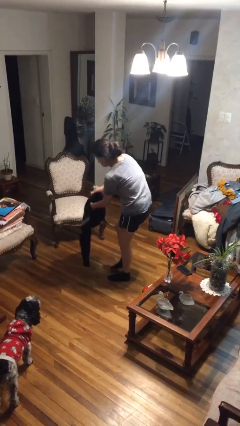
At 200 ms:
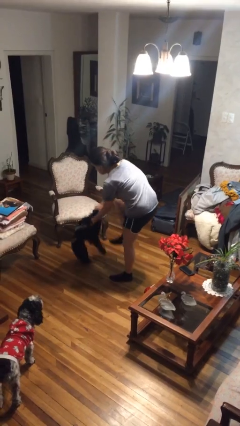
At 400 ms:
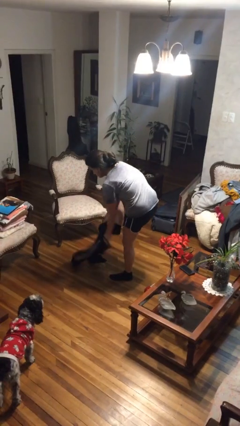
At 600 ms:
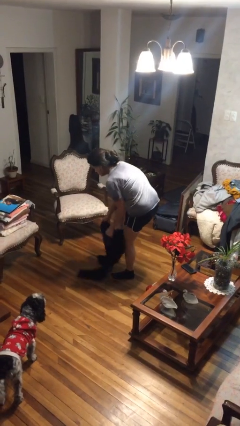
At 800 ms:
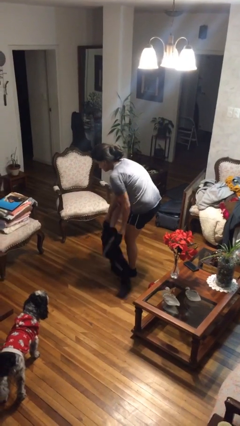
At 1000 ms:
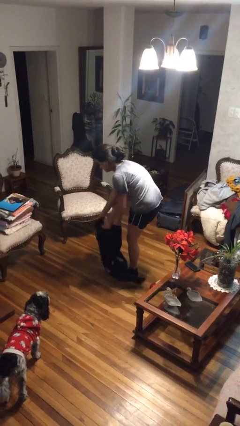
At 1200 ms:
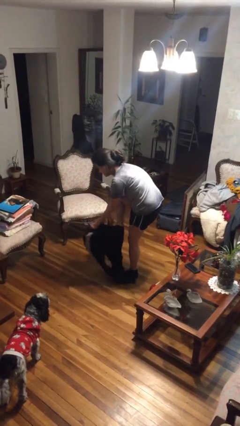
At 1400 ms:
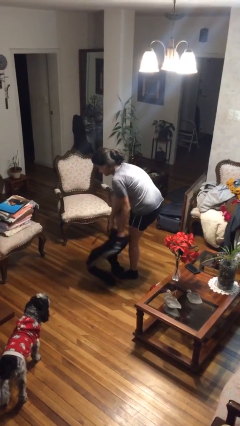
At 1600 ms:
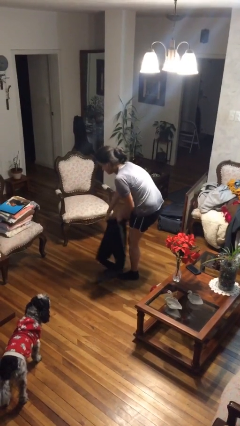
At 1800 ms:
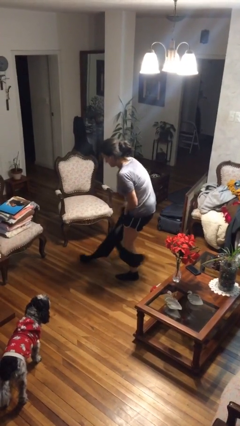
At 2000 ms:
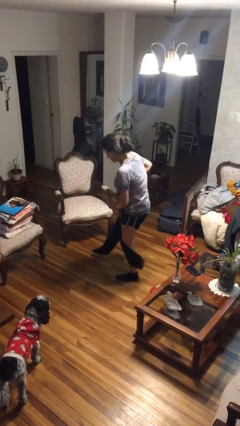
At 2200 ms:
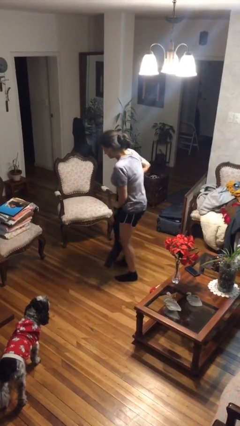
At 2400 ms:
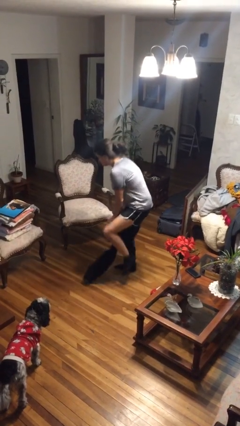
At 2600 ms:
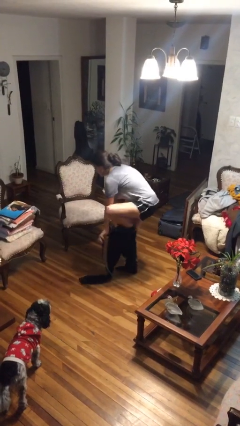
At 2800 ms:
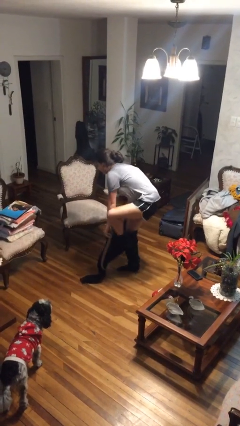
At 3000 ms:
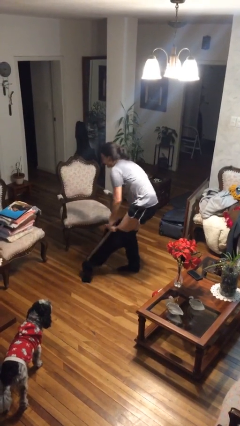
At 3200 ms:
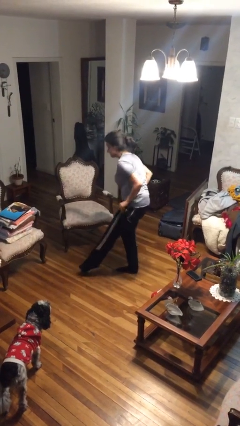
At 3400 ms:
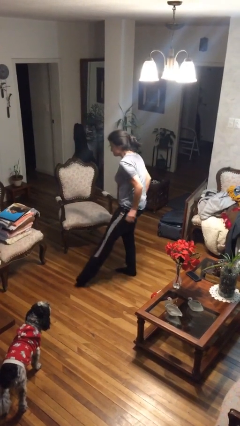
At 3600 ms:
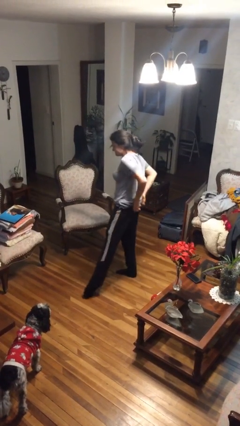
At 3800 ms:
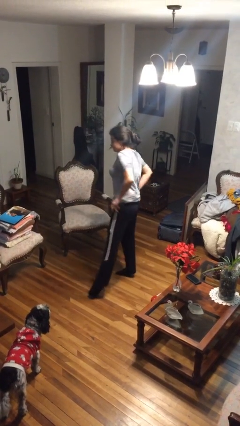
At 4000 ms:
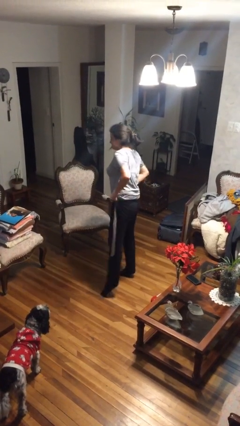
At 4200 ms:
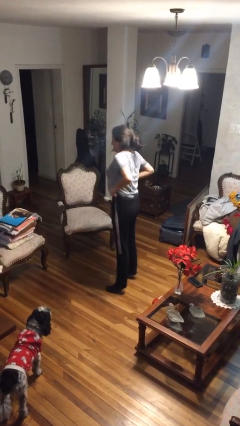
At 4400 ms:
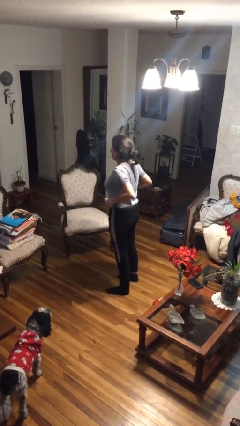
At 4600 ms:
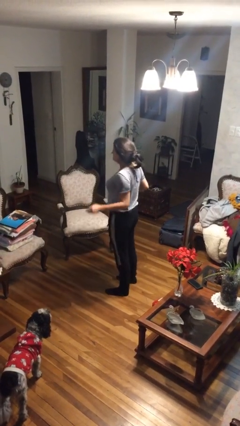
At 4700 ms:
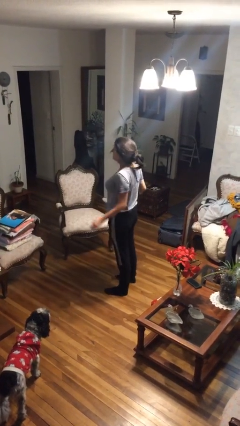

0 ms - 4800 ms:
person puts on pants

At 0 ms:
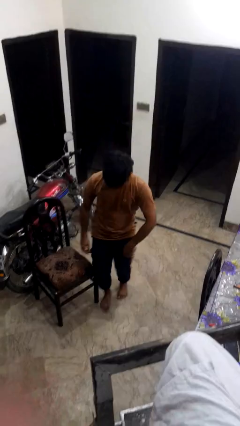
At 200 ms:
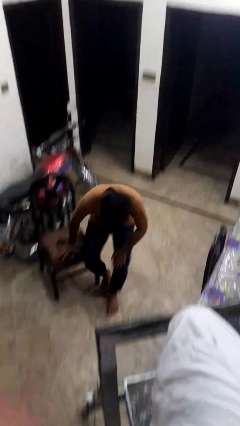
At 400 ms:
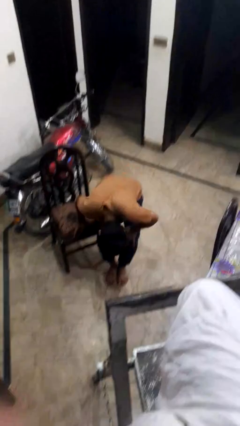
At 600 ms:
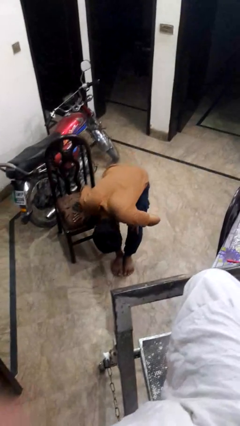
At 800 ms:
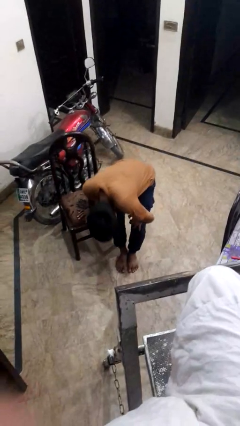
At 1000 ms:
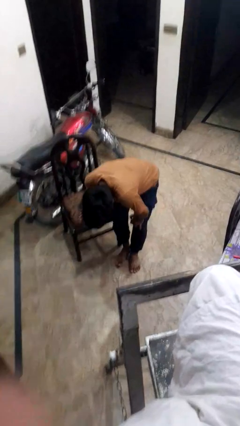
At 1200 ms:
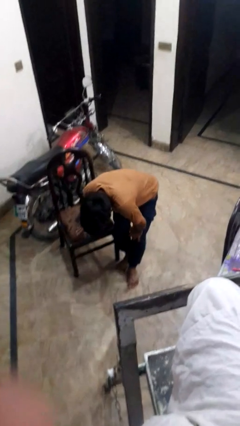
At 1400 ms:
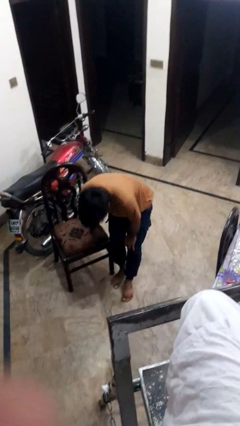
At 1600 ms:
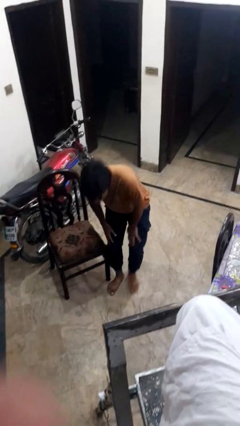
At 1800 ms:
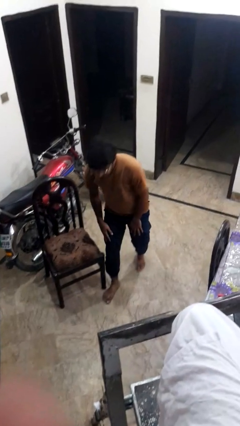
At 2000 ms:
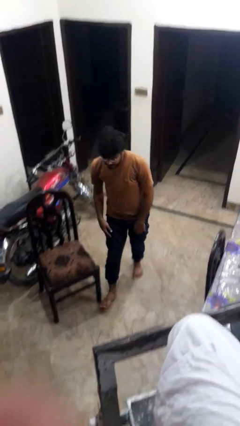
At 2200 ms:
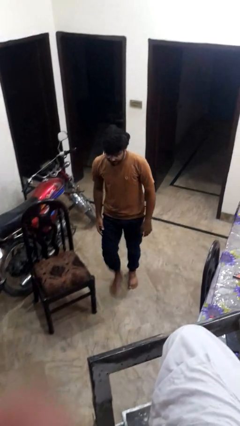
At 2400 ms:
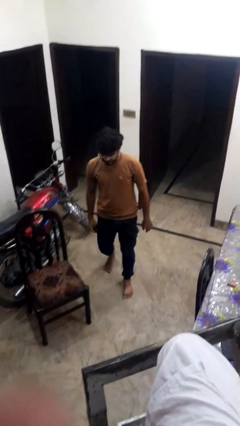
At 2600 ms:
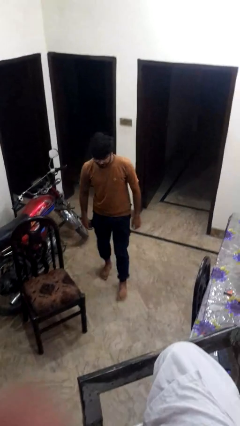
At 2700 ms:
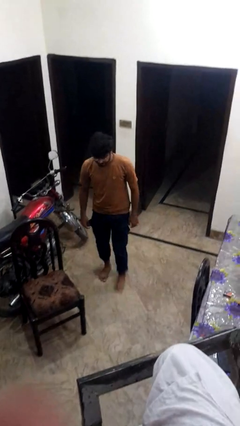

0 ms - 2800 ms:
person stubs toe

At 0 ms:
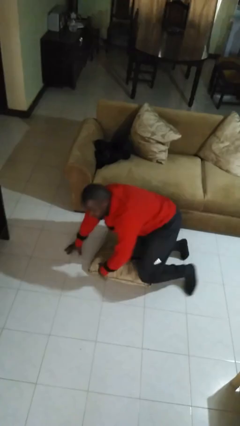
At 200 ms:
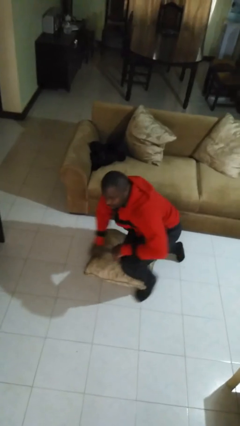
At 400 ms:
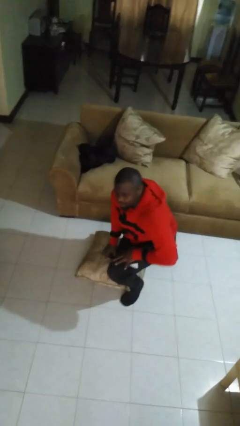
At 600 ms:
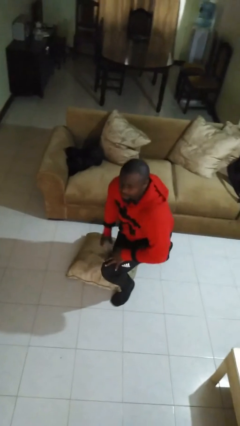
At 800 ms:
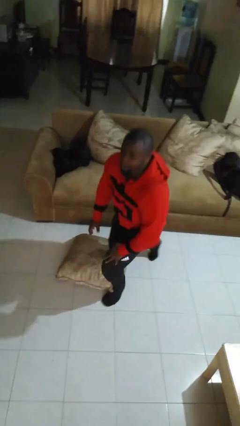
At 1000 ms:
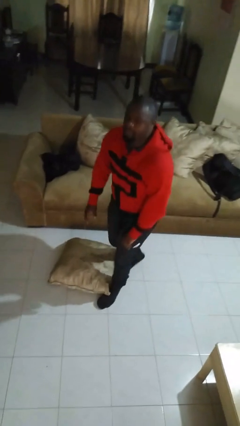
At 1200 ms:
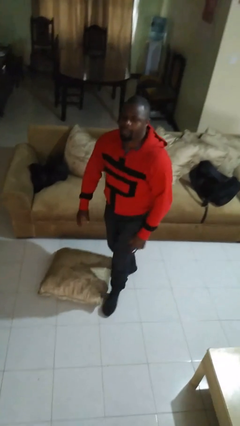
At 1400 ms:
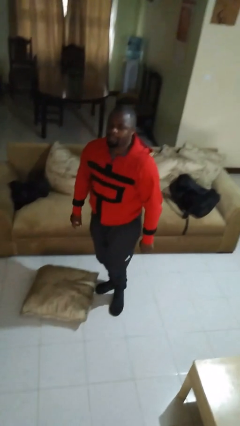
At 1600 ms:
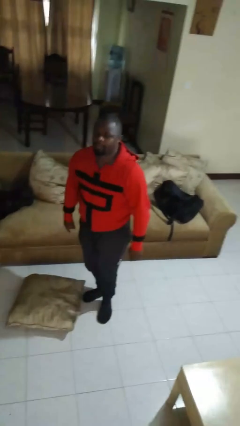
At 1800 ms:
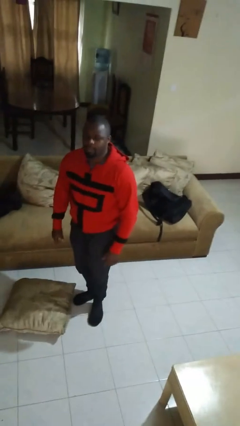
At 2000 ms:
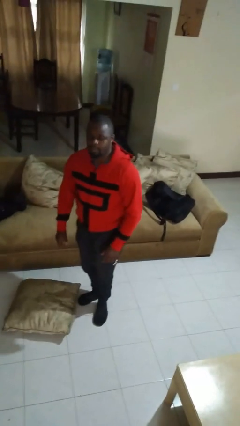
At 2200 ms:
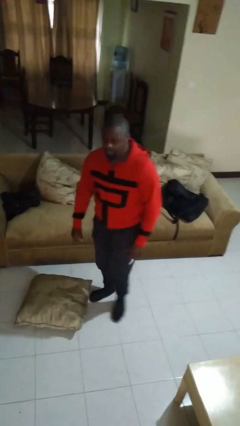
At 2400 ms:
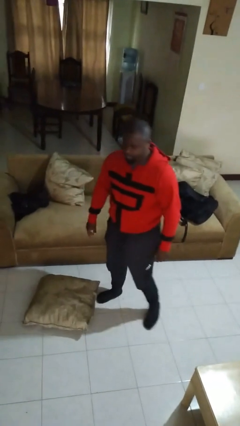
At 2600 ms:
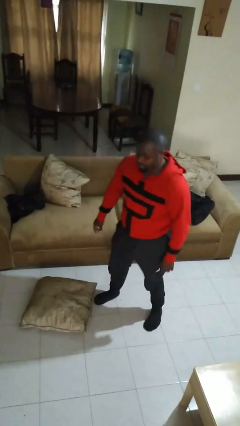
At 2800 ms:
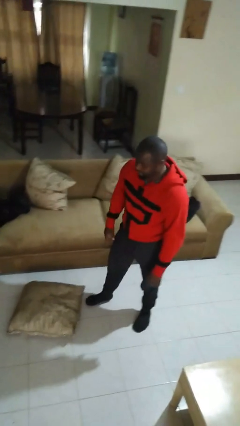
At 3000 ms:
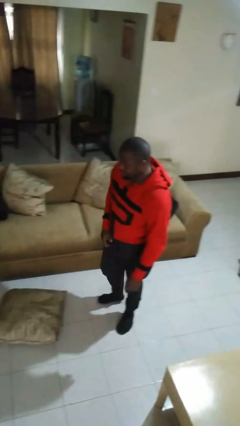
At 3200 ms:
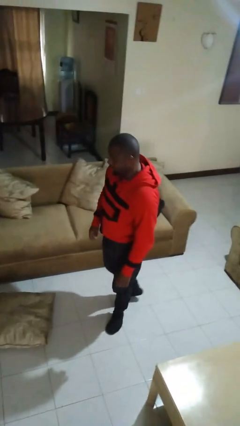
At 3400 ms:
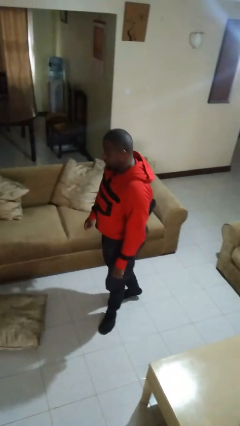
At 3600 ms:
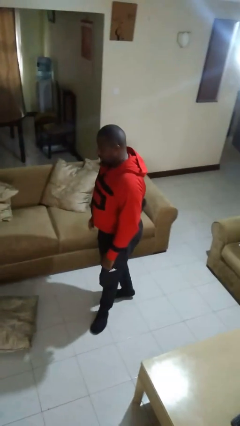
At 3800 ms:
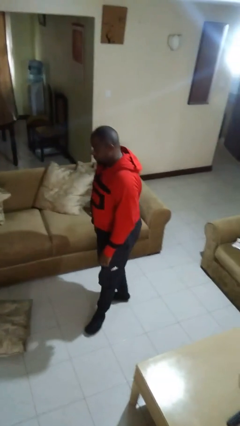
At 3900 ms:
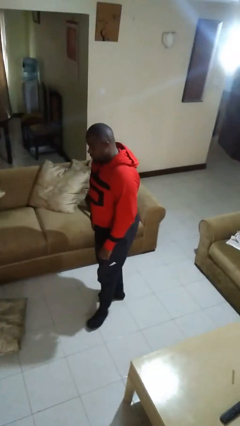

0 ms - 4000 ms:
person stands up from floor

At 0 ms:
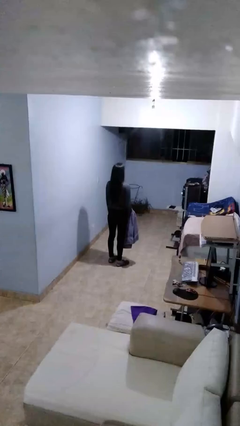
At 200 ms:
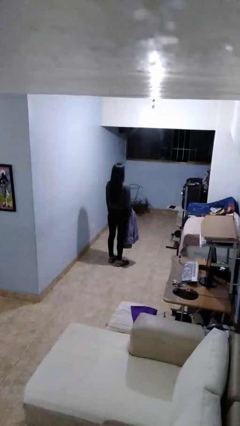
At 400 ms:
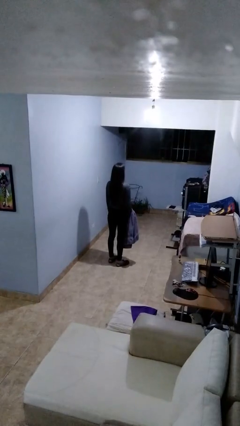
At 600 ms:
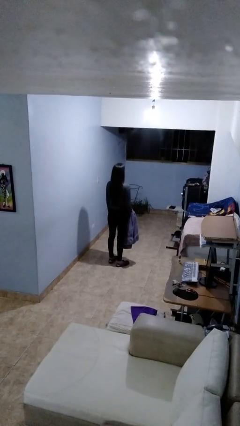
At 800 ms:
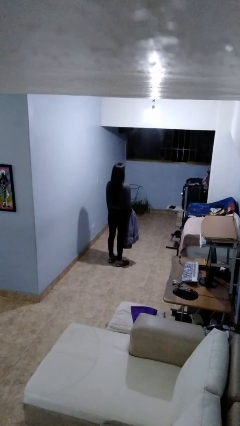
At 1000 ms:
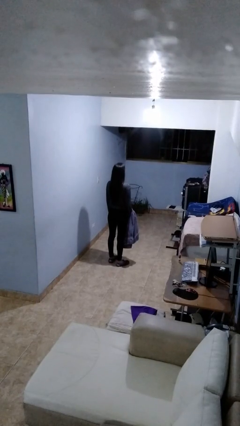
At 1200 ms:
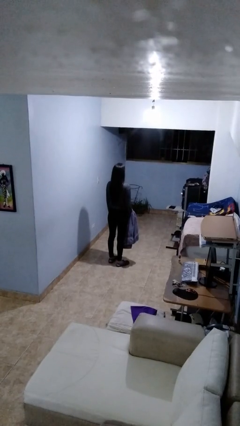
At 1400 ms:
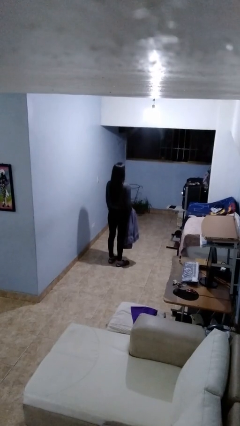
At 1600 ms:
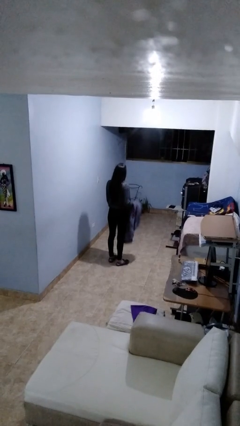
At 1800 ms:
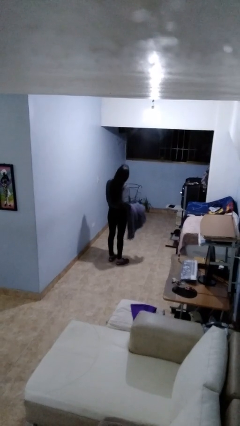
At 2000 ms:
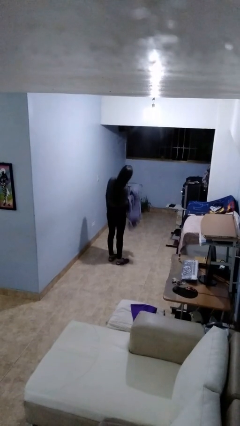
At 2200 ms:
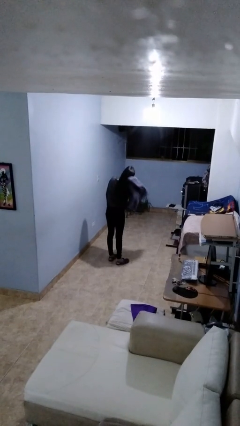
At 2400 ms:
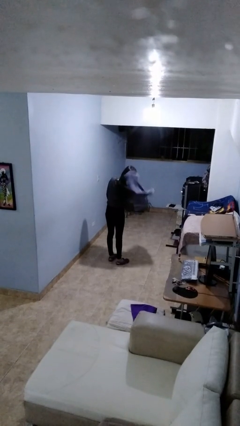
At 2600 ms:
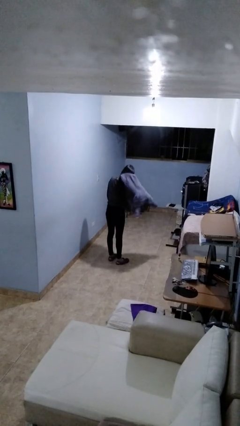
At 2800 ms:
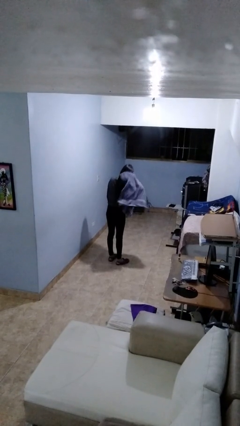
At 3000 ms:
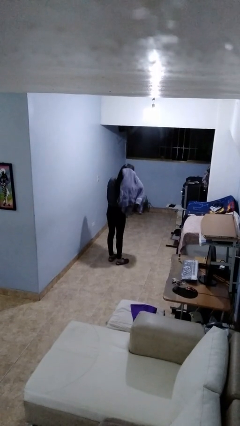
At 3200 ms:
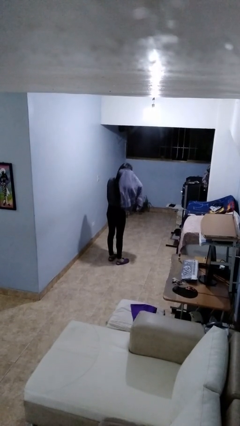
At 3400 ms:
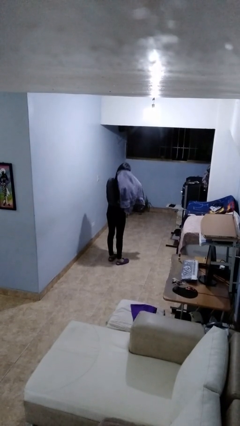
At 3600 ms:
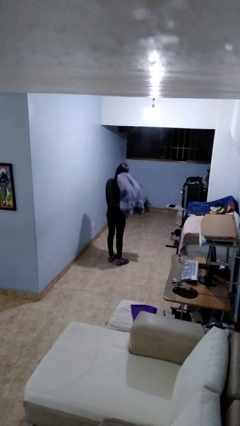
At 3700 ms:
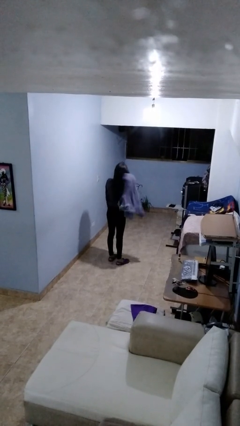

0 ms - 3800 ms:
person dries hair with towel

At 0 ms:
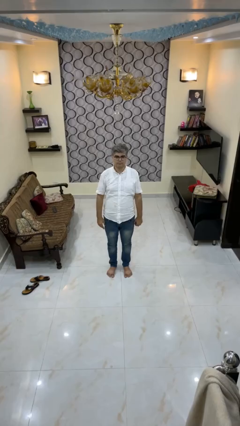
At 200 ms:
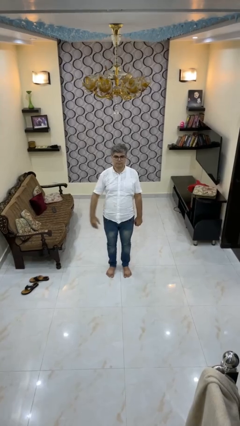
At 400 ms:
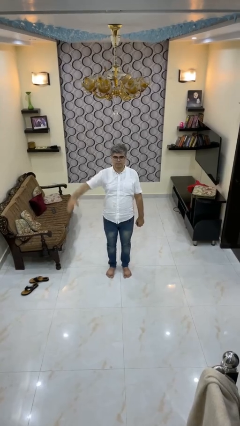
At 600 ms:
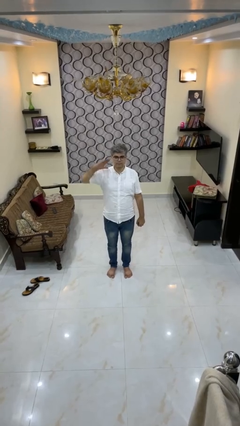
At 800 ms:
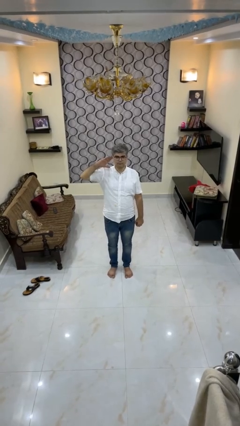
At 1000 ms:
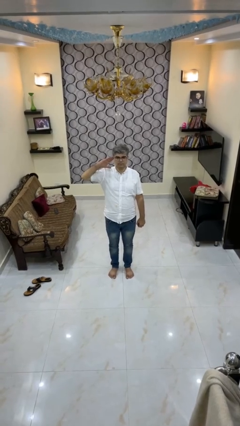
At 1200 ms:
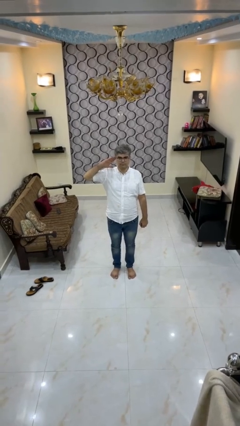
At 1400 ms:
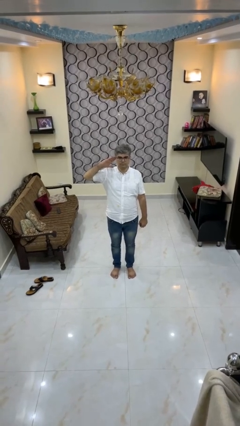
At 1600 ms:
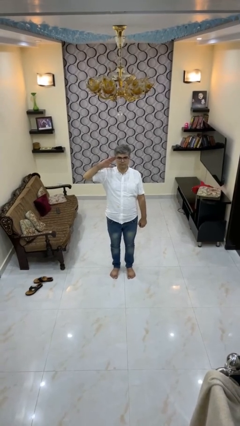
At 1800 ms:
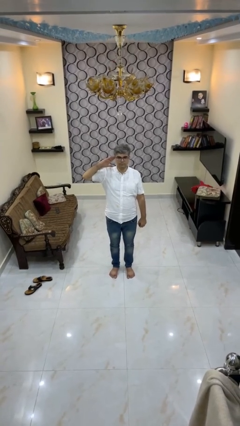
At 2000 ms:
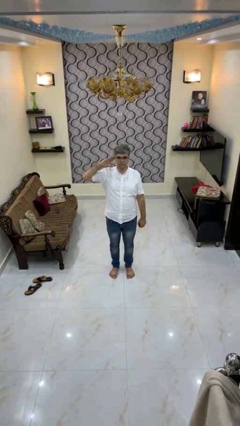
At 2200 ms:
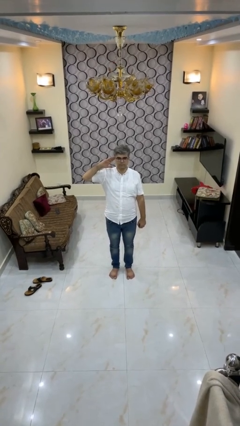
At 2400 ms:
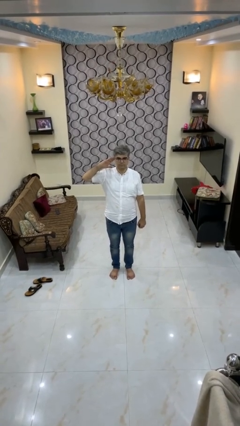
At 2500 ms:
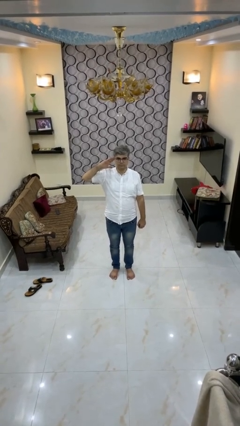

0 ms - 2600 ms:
person salutes
